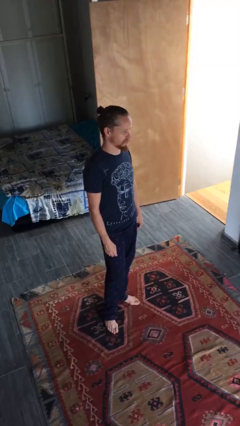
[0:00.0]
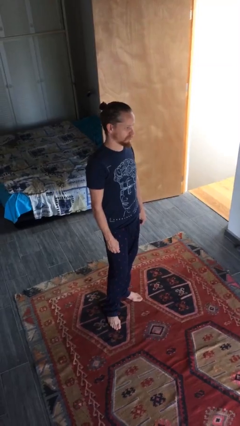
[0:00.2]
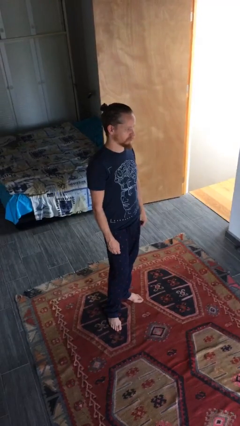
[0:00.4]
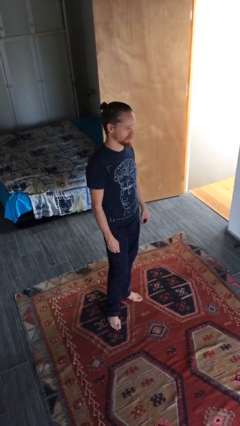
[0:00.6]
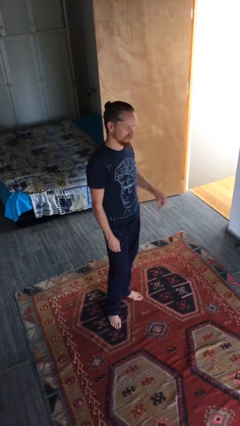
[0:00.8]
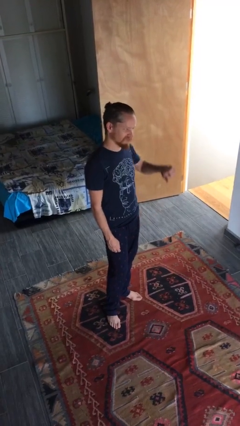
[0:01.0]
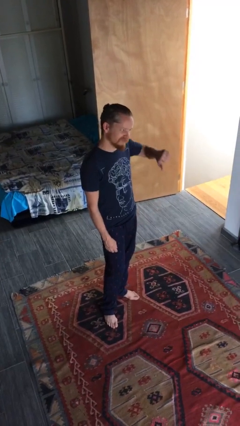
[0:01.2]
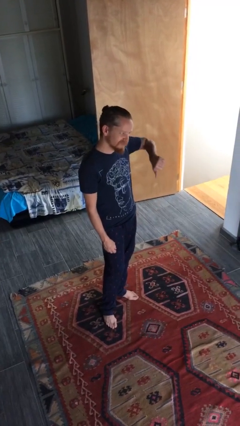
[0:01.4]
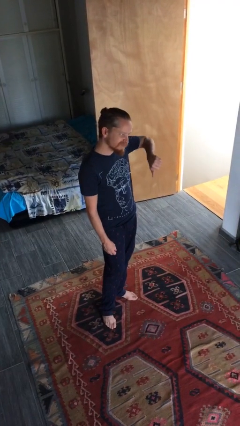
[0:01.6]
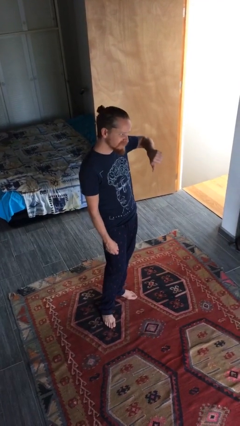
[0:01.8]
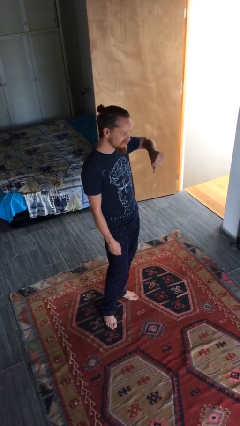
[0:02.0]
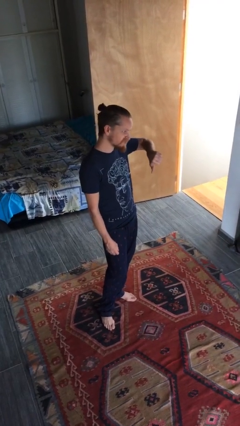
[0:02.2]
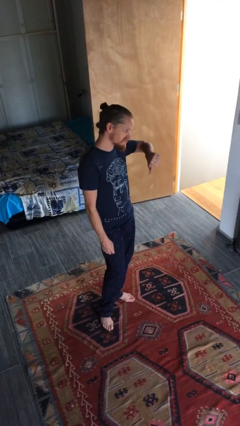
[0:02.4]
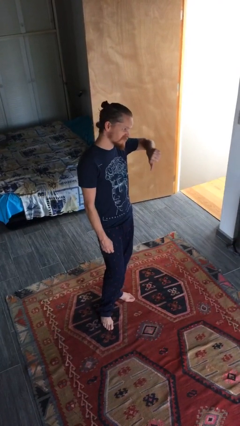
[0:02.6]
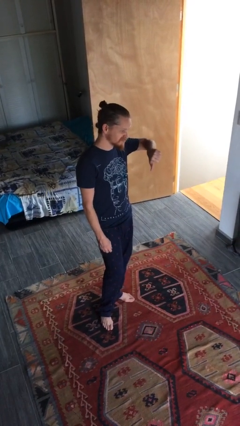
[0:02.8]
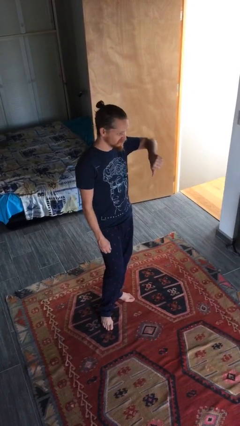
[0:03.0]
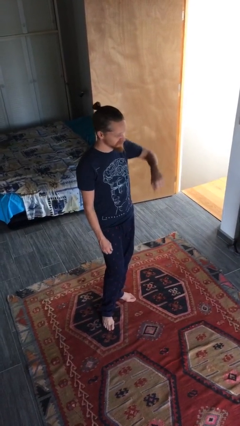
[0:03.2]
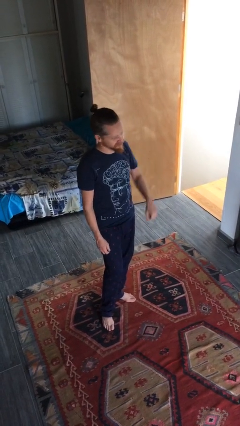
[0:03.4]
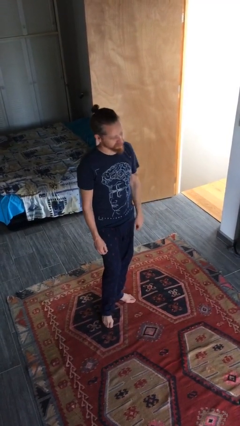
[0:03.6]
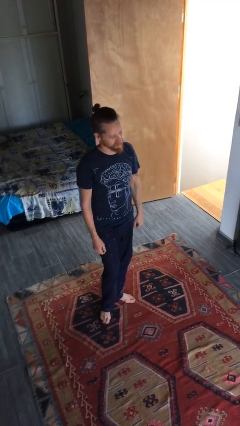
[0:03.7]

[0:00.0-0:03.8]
person gestures thumbs down

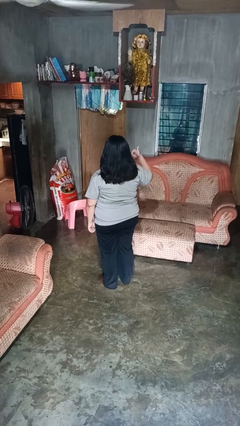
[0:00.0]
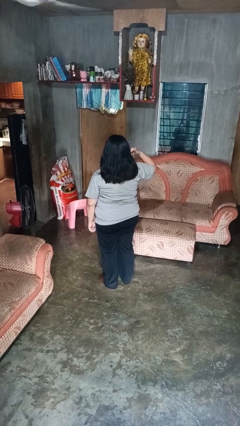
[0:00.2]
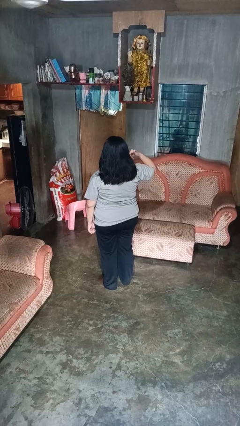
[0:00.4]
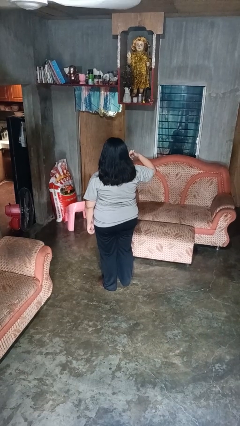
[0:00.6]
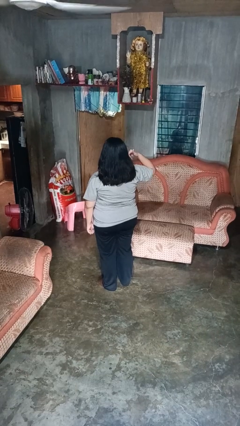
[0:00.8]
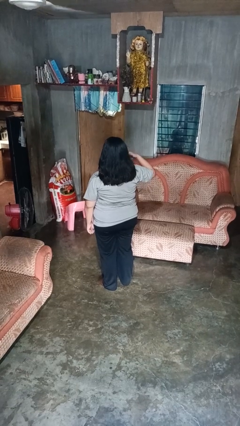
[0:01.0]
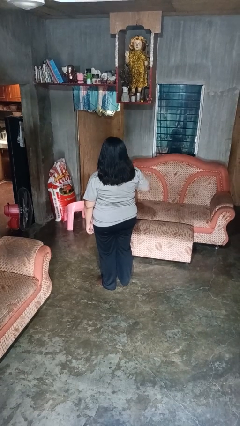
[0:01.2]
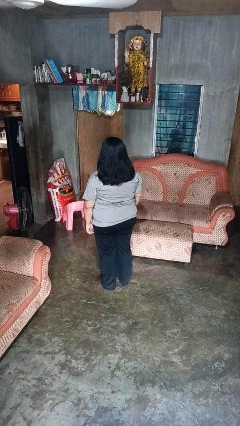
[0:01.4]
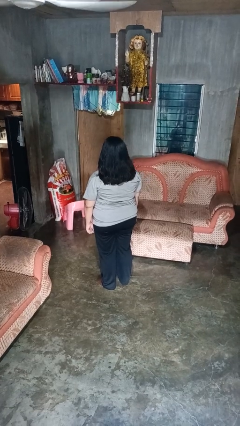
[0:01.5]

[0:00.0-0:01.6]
person gestures call me

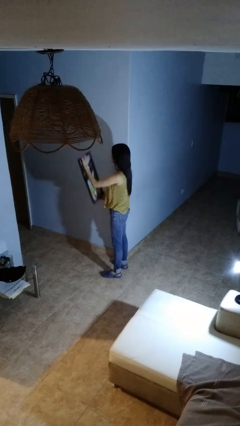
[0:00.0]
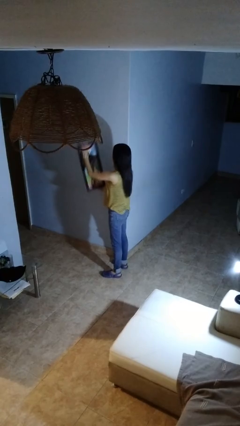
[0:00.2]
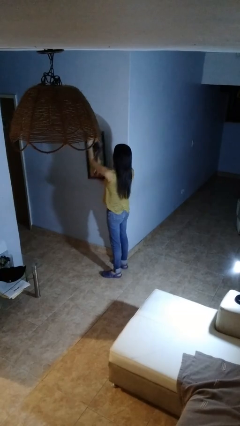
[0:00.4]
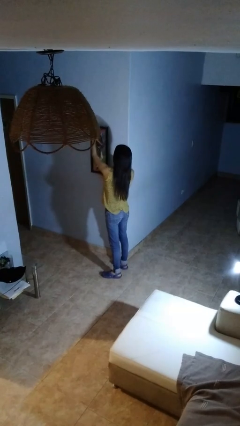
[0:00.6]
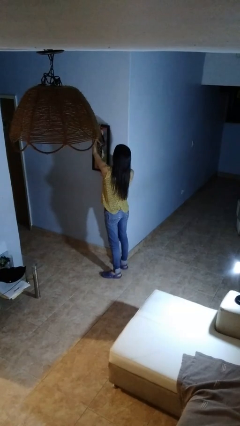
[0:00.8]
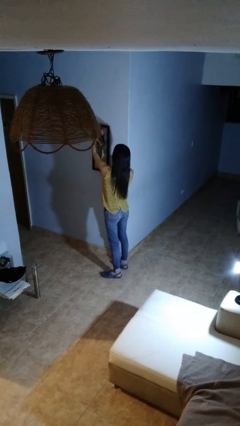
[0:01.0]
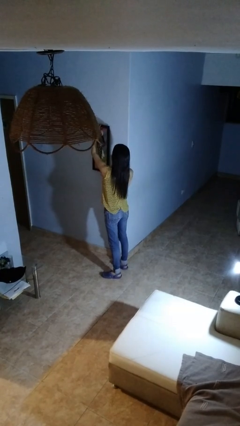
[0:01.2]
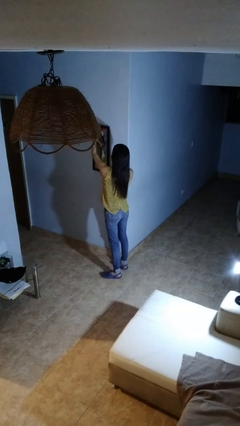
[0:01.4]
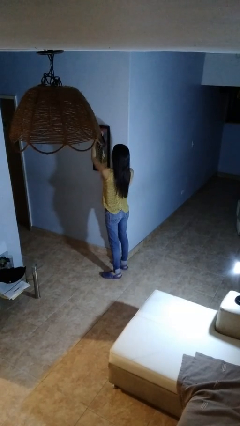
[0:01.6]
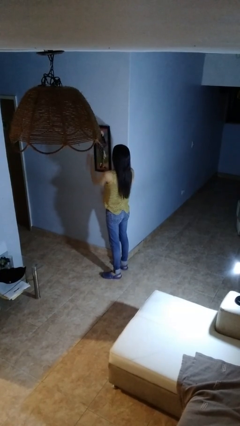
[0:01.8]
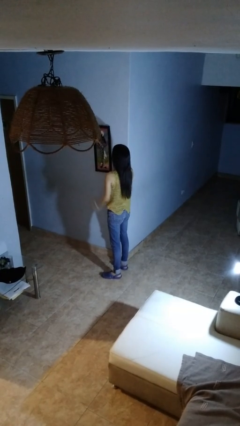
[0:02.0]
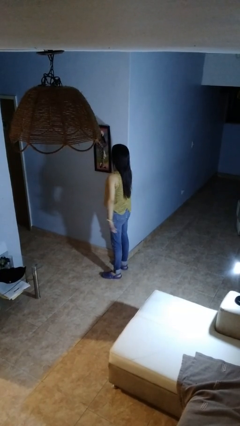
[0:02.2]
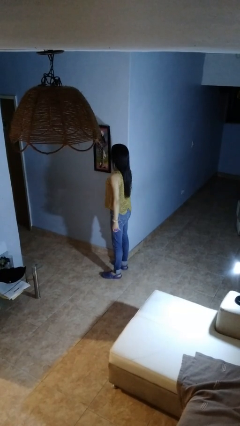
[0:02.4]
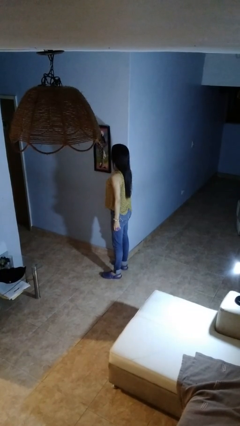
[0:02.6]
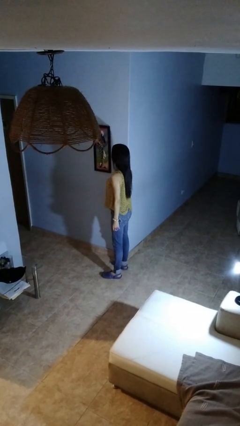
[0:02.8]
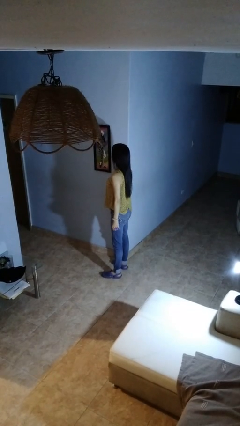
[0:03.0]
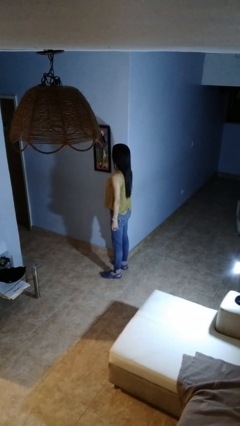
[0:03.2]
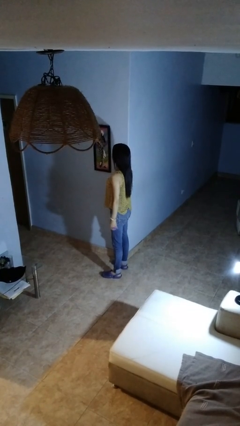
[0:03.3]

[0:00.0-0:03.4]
person puts up picture frame

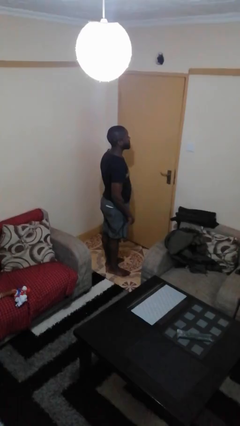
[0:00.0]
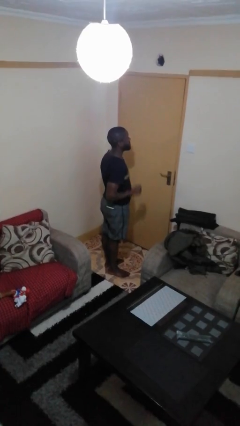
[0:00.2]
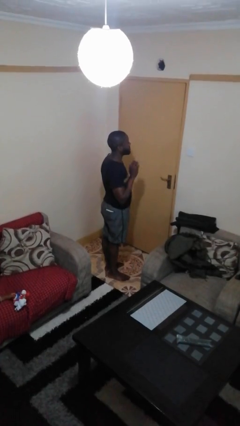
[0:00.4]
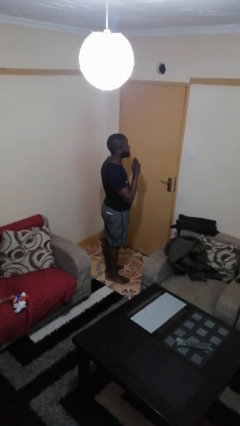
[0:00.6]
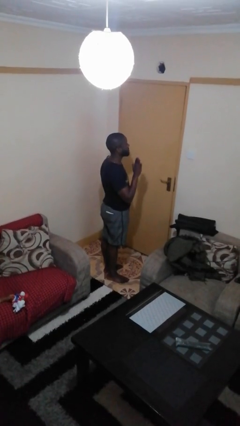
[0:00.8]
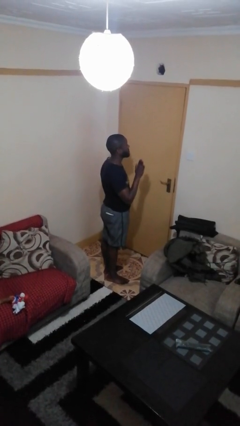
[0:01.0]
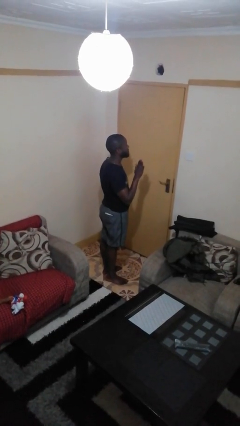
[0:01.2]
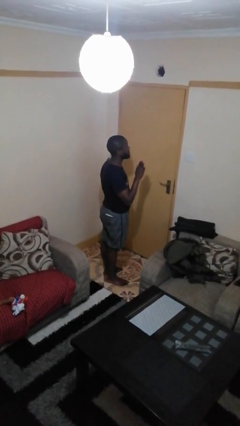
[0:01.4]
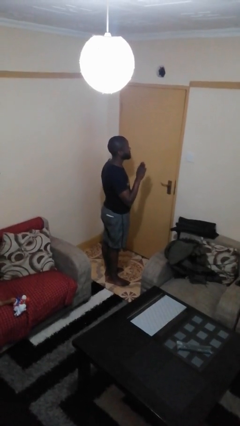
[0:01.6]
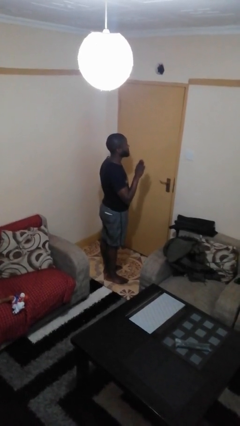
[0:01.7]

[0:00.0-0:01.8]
person gestures stop

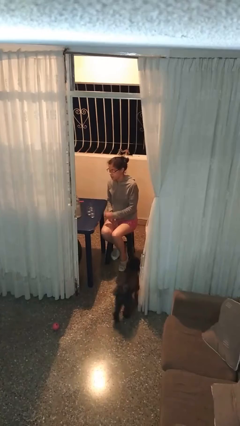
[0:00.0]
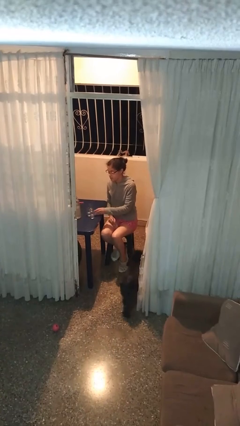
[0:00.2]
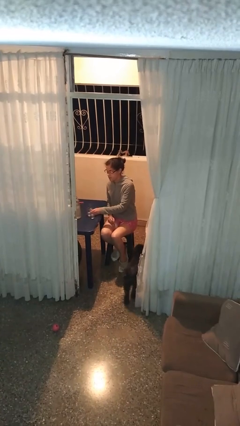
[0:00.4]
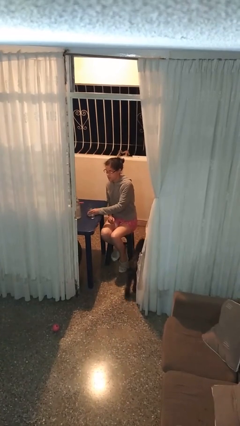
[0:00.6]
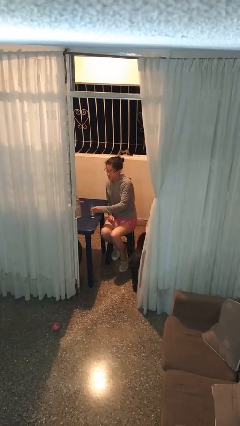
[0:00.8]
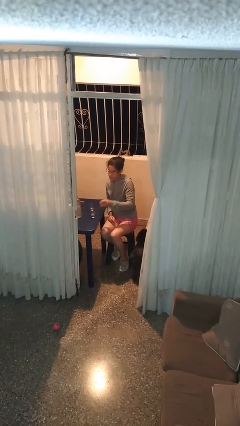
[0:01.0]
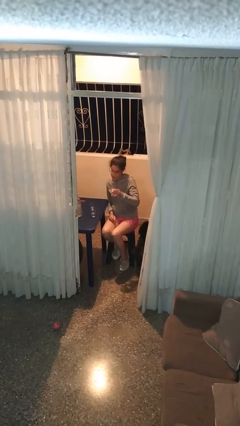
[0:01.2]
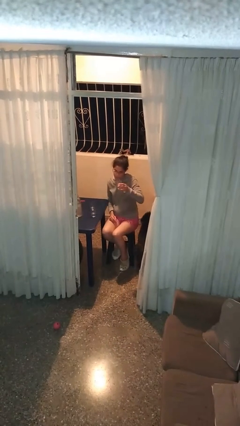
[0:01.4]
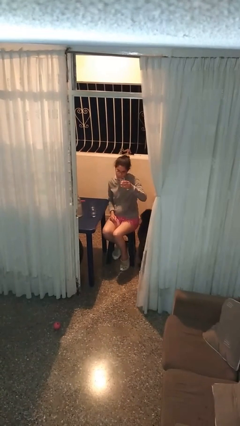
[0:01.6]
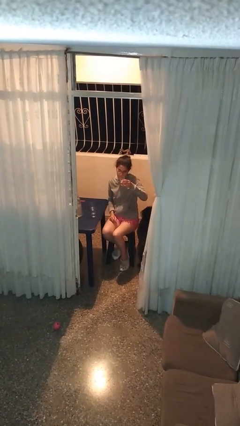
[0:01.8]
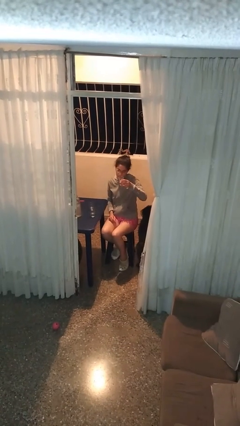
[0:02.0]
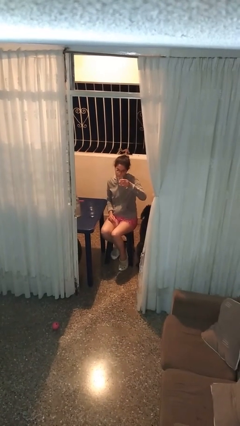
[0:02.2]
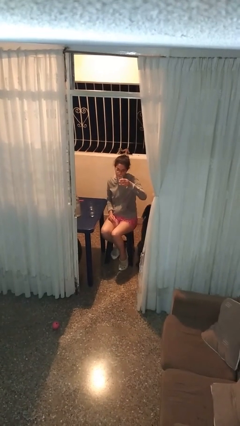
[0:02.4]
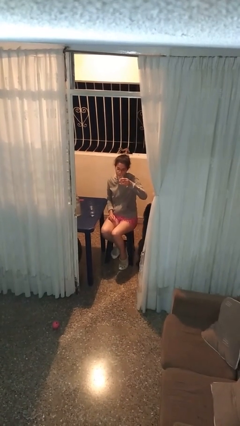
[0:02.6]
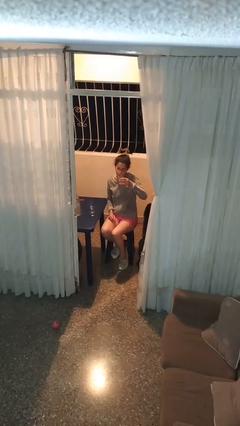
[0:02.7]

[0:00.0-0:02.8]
person picks up object from table

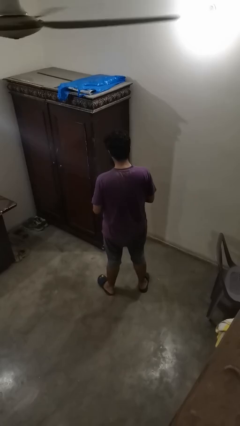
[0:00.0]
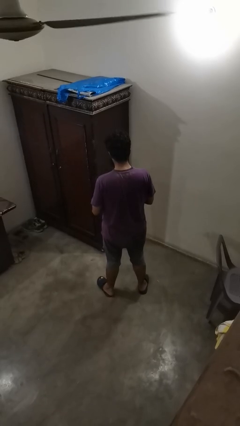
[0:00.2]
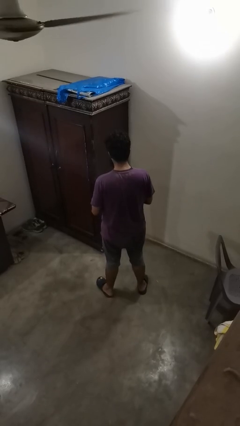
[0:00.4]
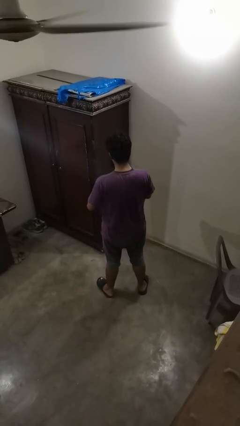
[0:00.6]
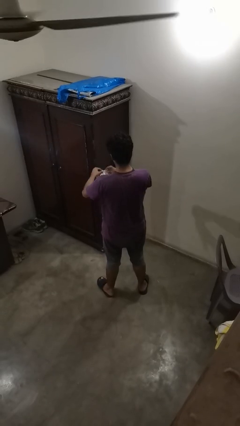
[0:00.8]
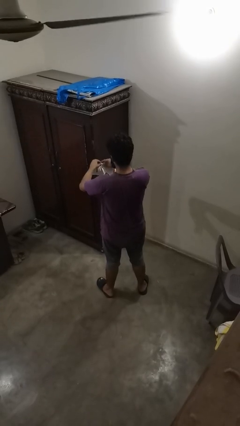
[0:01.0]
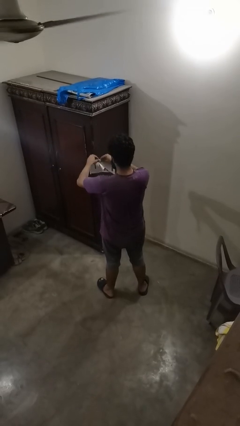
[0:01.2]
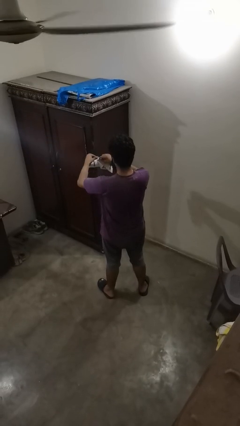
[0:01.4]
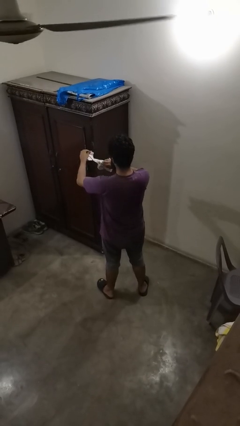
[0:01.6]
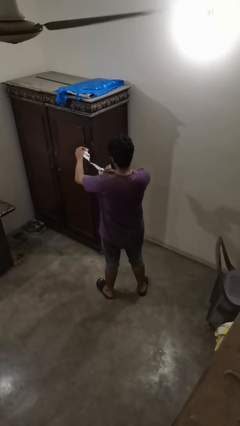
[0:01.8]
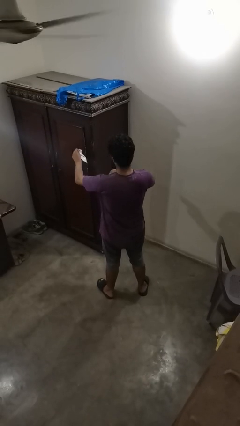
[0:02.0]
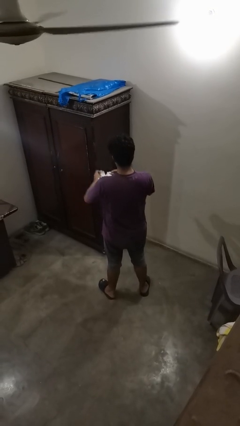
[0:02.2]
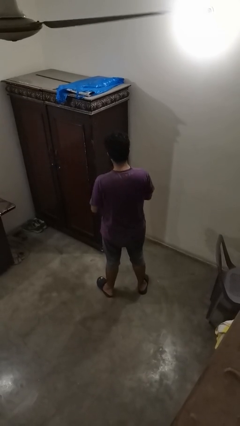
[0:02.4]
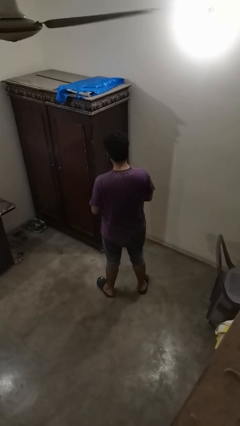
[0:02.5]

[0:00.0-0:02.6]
person tears paper

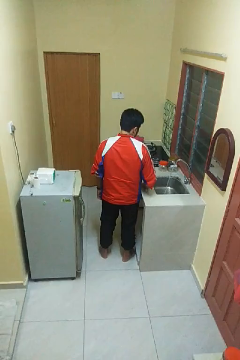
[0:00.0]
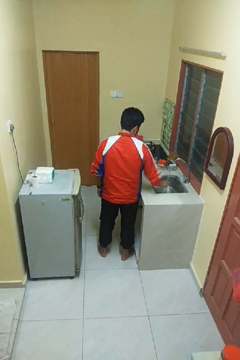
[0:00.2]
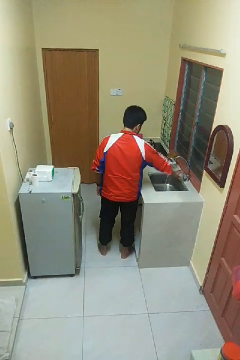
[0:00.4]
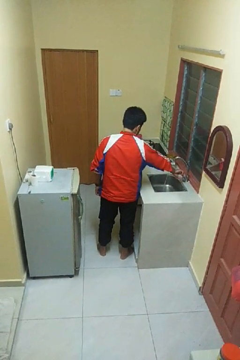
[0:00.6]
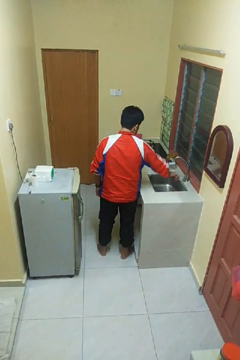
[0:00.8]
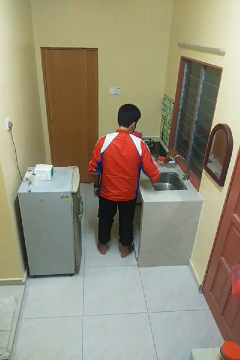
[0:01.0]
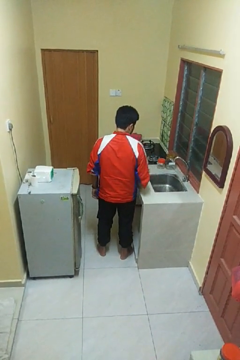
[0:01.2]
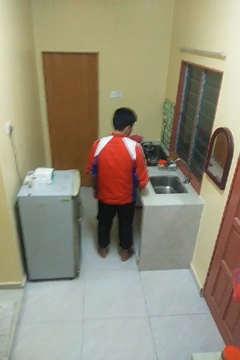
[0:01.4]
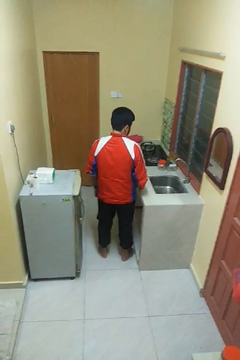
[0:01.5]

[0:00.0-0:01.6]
person turns off faucet
